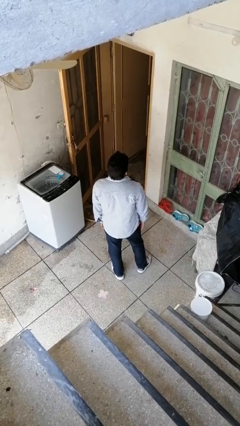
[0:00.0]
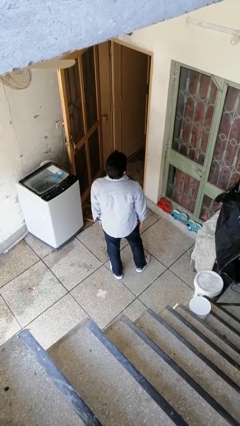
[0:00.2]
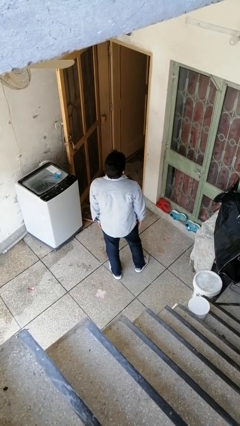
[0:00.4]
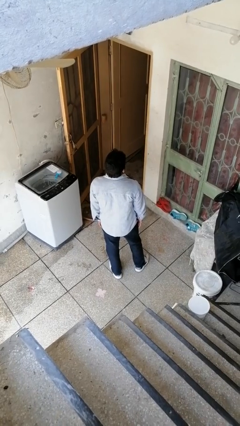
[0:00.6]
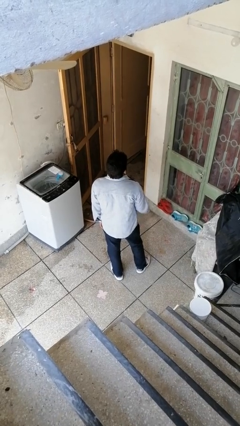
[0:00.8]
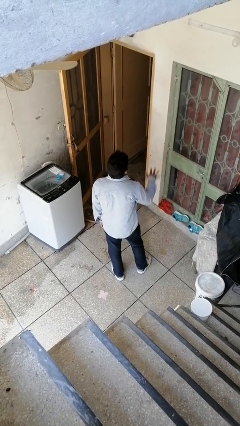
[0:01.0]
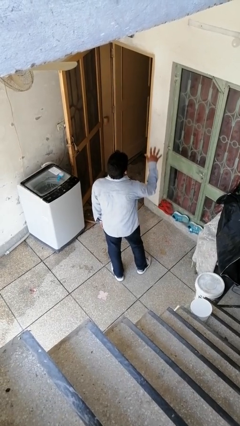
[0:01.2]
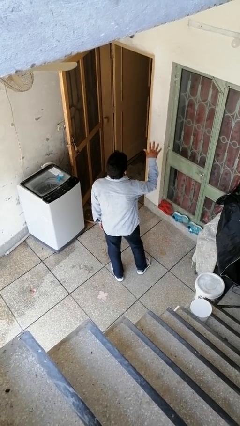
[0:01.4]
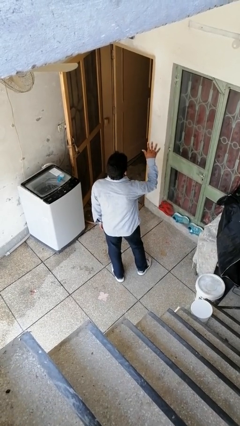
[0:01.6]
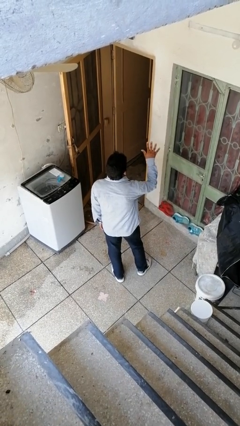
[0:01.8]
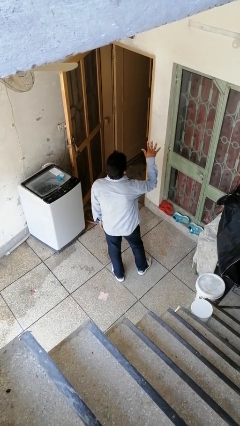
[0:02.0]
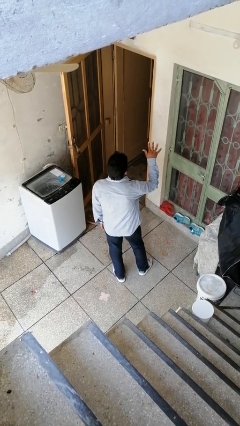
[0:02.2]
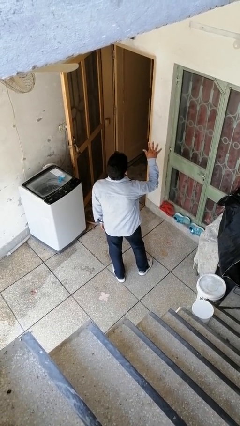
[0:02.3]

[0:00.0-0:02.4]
person gestures number five

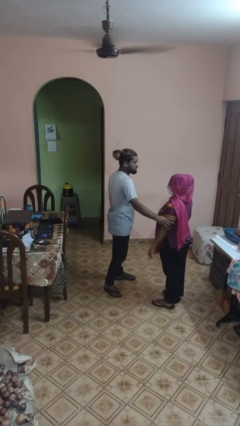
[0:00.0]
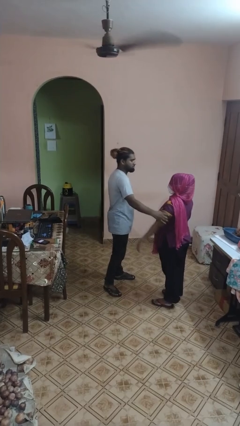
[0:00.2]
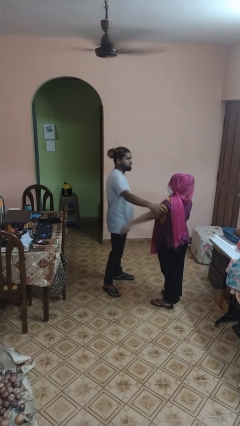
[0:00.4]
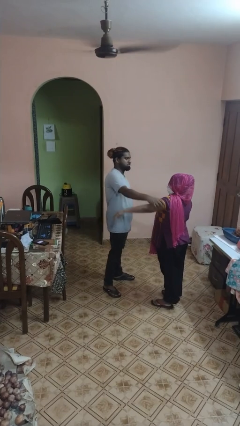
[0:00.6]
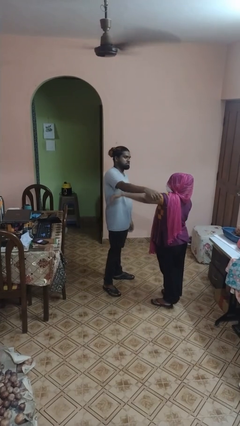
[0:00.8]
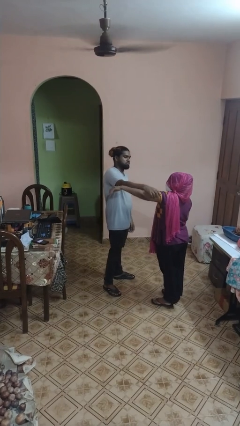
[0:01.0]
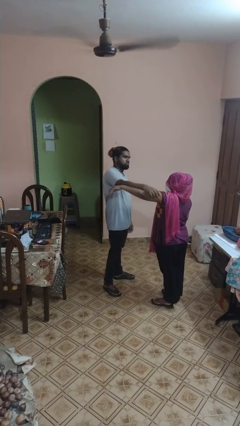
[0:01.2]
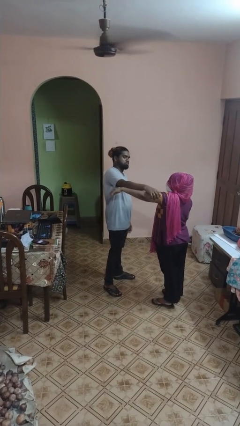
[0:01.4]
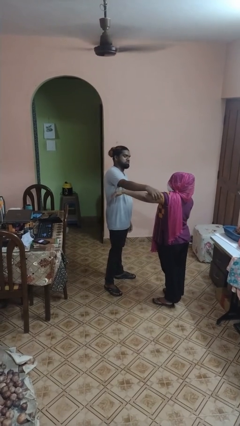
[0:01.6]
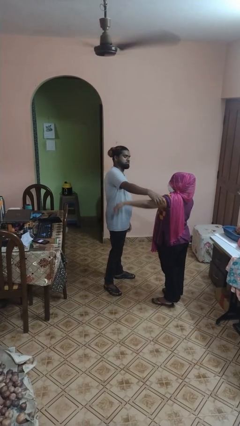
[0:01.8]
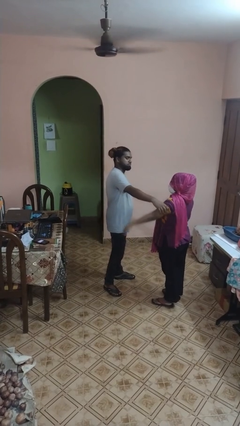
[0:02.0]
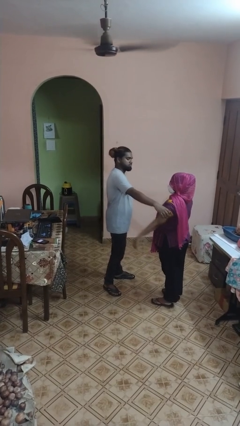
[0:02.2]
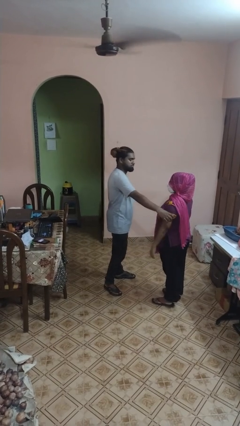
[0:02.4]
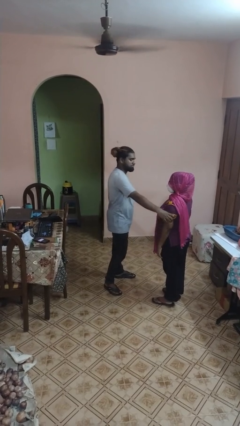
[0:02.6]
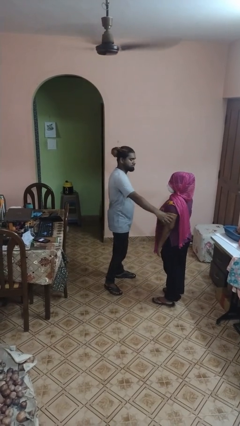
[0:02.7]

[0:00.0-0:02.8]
person grabs person by bicep

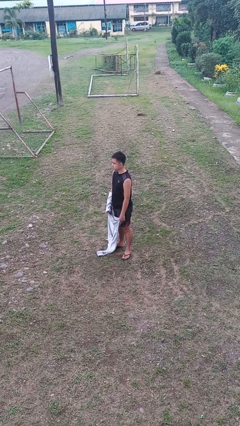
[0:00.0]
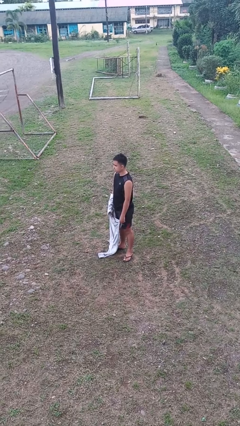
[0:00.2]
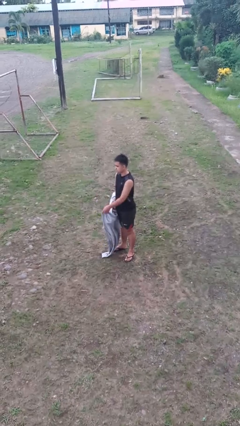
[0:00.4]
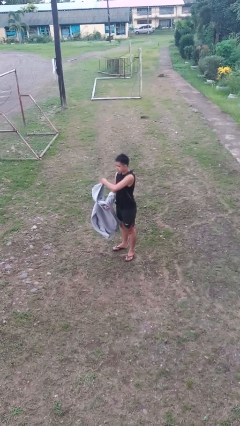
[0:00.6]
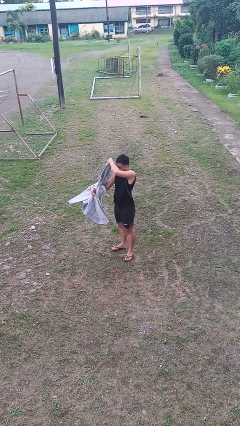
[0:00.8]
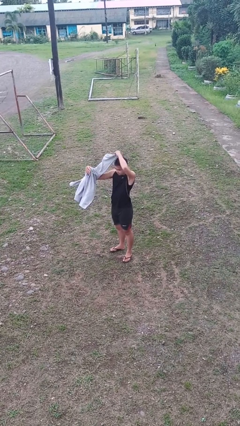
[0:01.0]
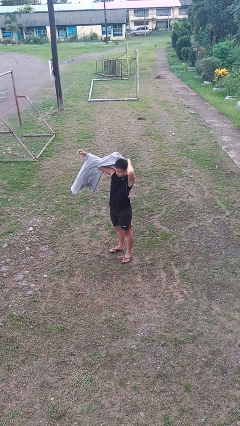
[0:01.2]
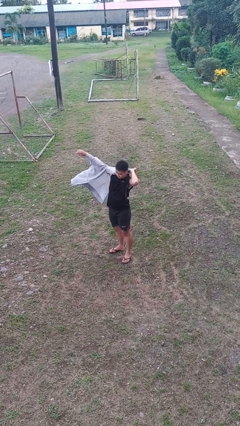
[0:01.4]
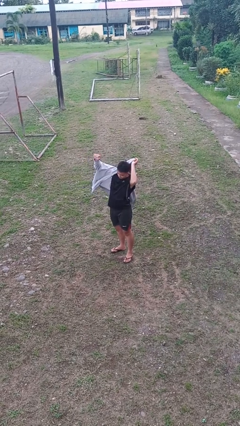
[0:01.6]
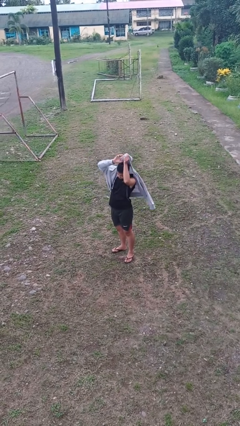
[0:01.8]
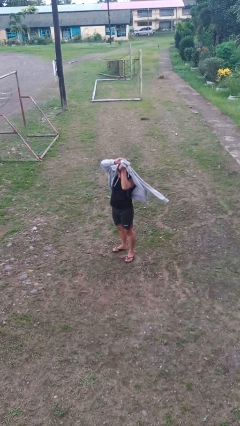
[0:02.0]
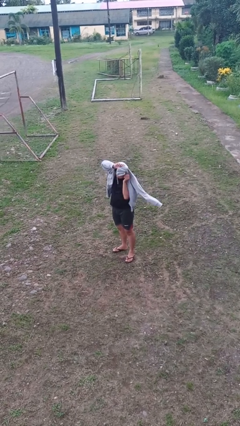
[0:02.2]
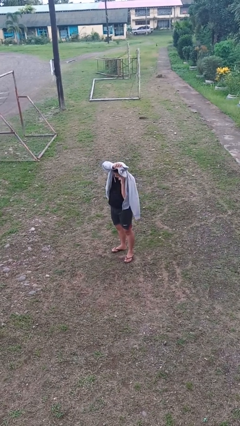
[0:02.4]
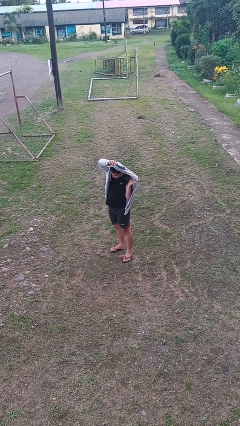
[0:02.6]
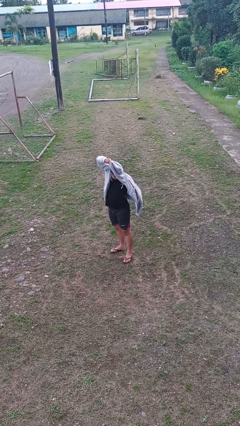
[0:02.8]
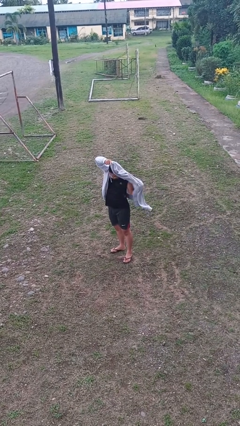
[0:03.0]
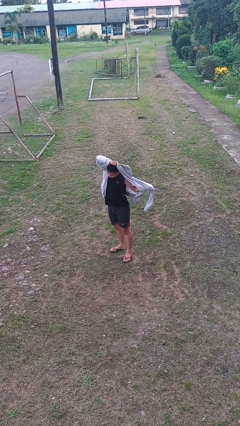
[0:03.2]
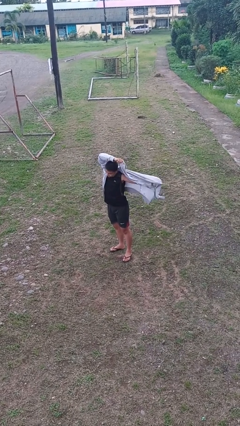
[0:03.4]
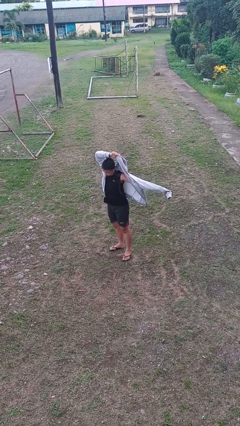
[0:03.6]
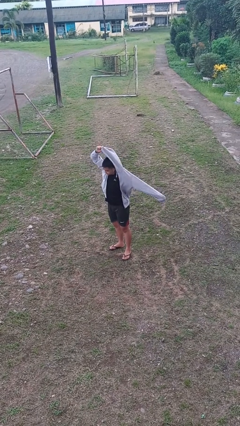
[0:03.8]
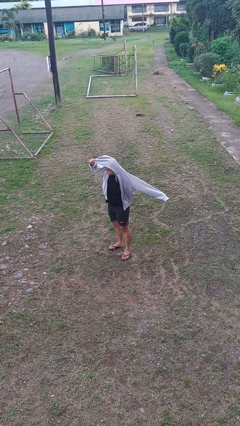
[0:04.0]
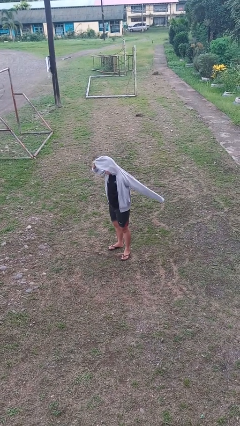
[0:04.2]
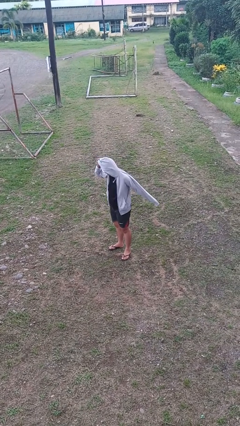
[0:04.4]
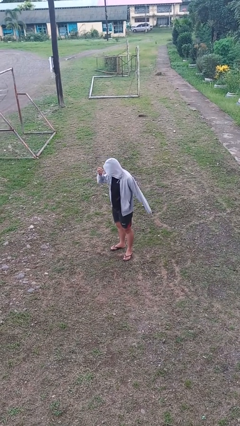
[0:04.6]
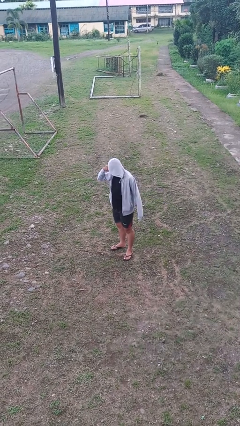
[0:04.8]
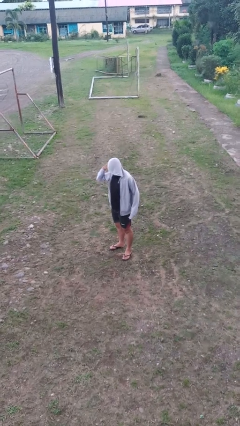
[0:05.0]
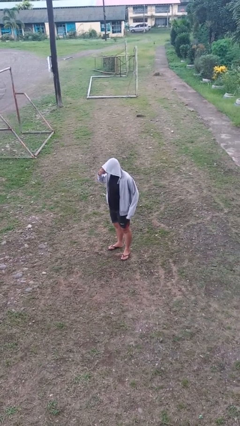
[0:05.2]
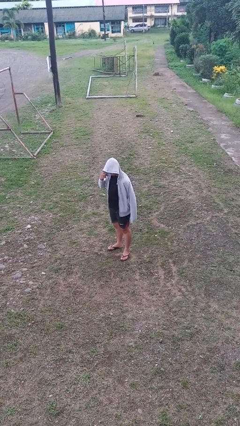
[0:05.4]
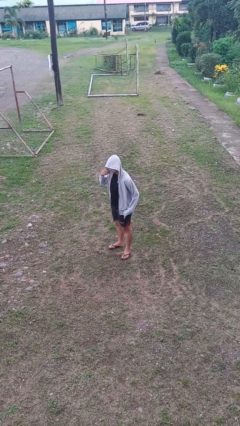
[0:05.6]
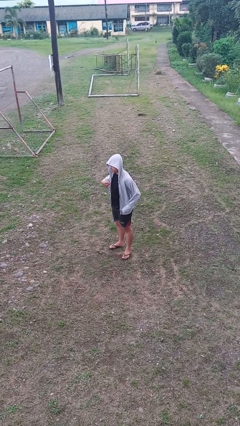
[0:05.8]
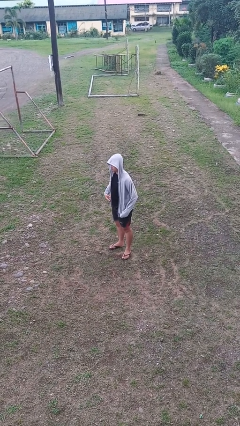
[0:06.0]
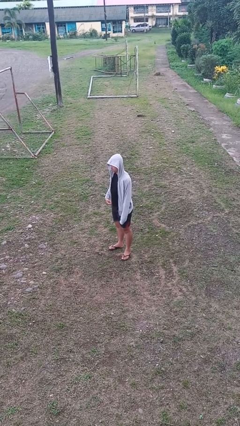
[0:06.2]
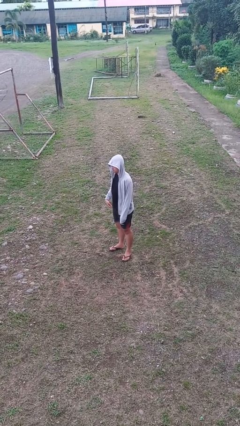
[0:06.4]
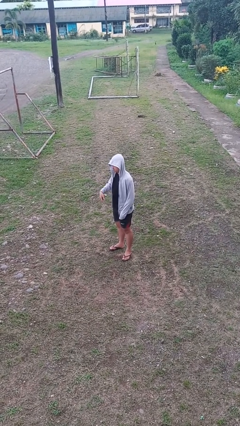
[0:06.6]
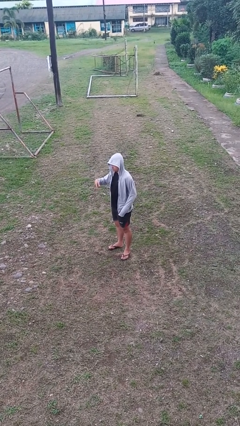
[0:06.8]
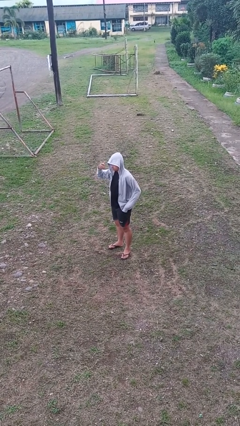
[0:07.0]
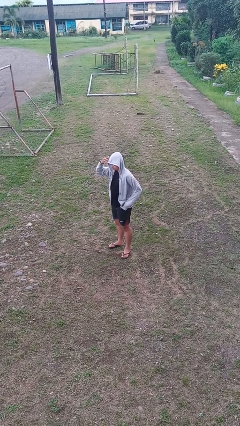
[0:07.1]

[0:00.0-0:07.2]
person puts on hoodie

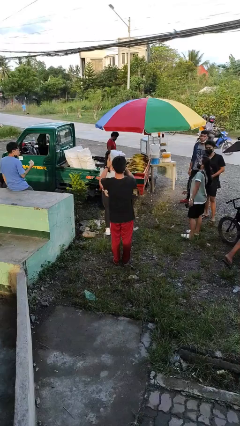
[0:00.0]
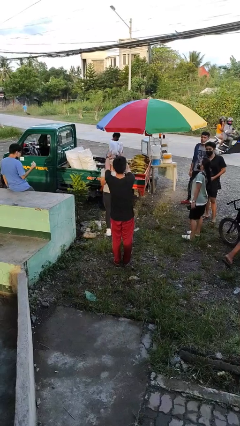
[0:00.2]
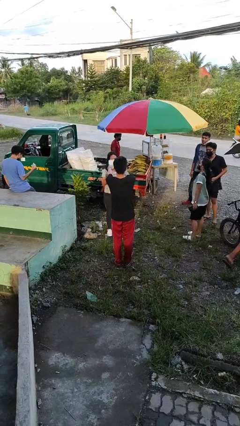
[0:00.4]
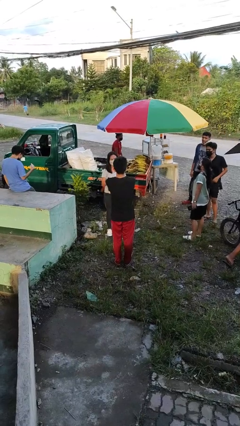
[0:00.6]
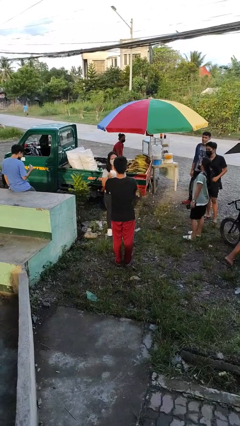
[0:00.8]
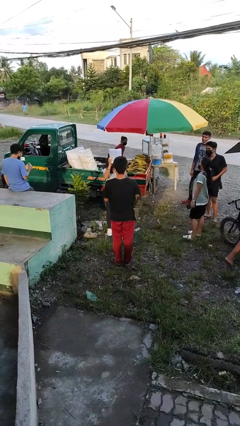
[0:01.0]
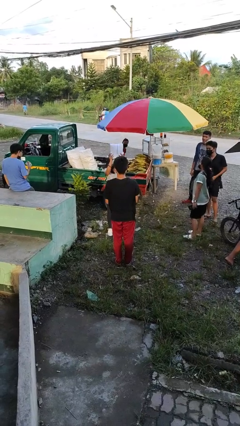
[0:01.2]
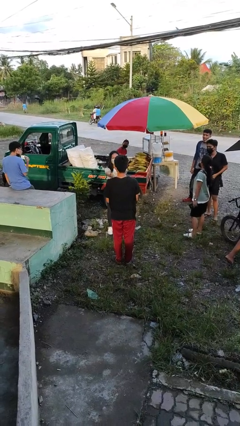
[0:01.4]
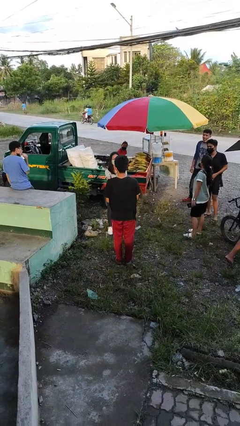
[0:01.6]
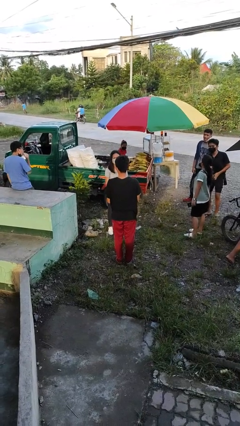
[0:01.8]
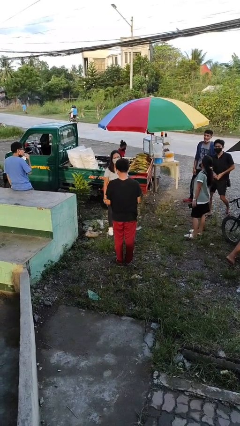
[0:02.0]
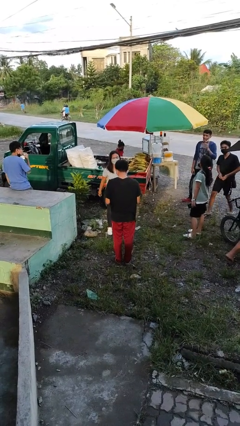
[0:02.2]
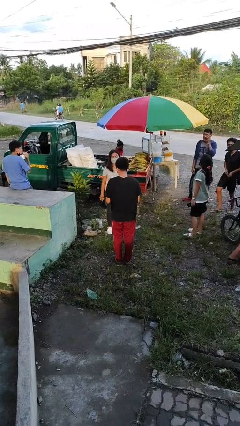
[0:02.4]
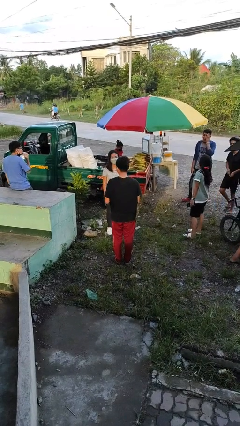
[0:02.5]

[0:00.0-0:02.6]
person transfers object to person

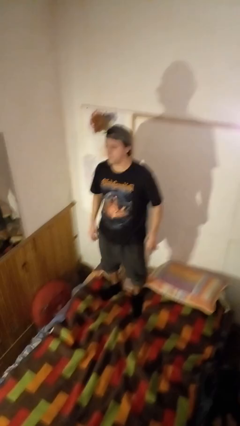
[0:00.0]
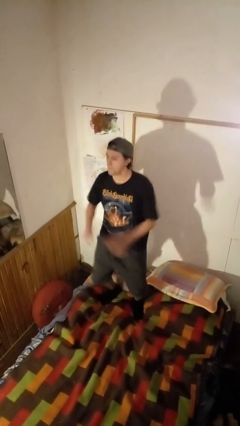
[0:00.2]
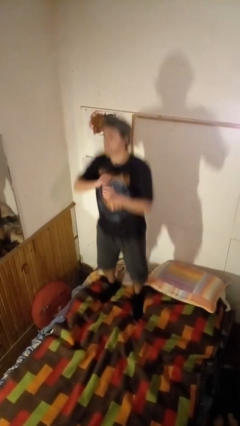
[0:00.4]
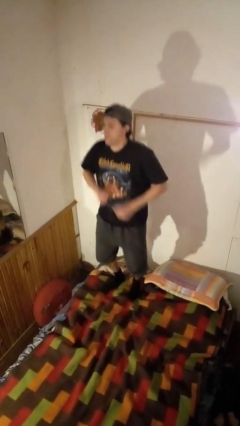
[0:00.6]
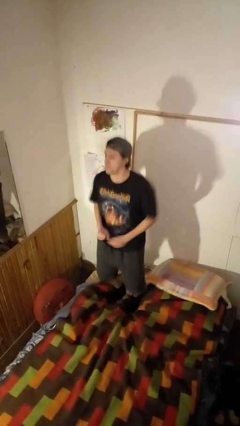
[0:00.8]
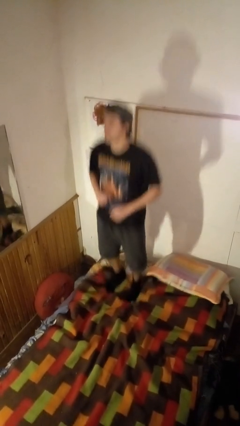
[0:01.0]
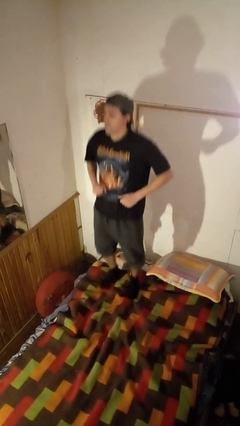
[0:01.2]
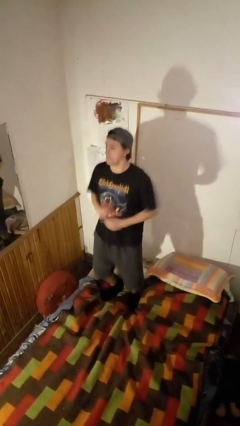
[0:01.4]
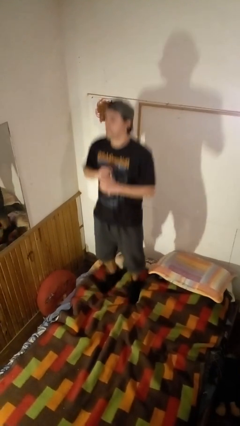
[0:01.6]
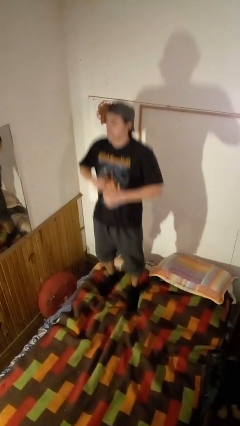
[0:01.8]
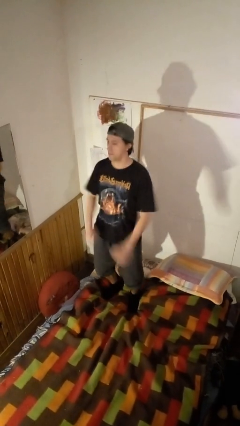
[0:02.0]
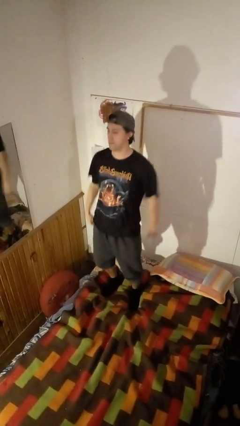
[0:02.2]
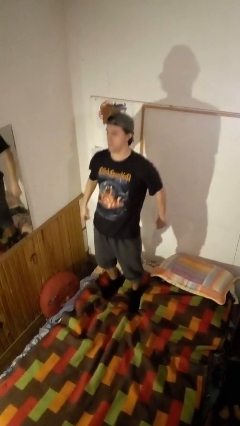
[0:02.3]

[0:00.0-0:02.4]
person jumps on bed
